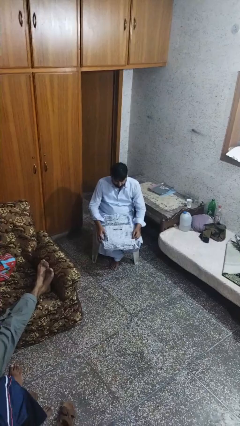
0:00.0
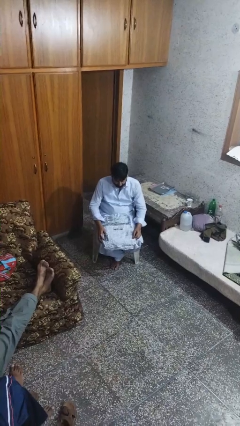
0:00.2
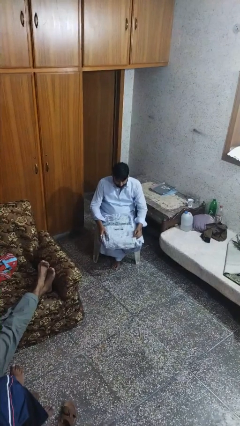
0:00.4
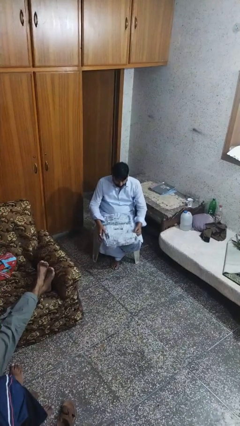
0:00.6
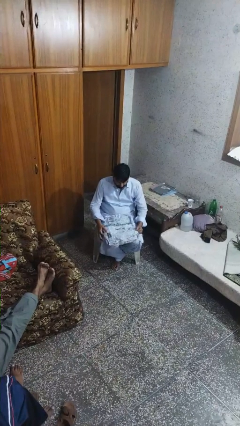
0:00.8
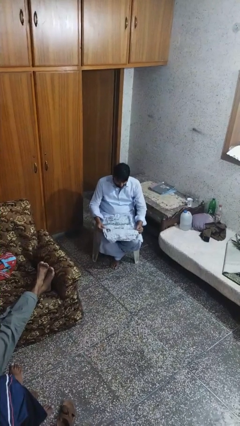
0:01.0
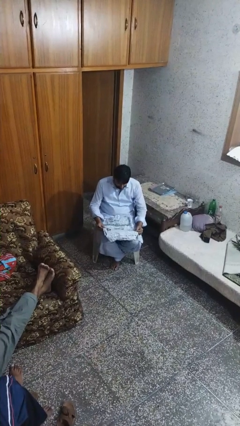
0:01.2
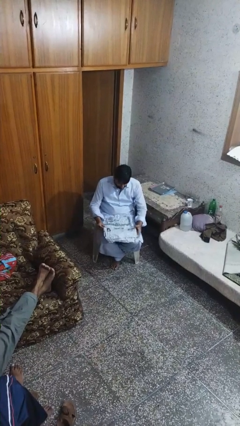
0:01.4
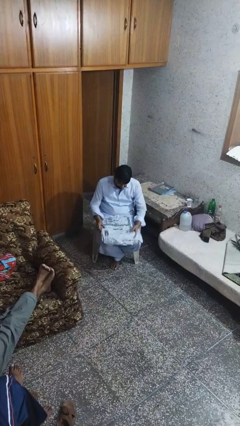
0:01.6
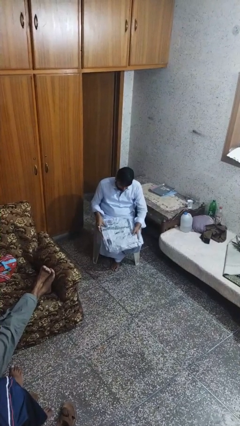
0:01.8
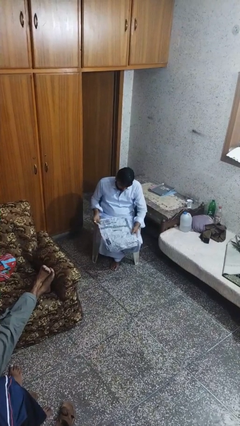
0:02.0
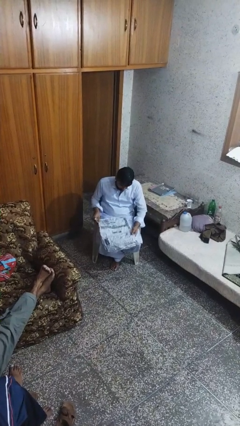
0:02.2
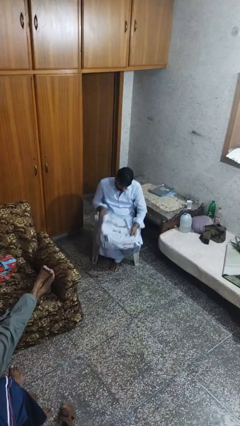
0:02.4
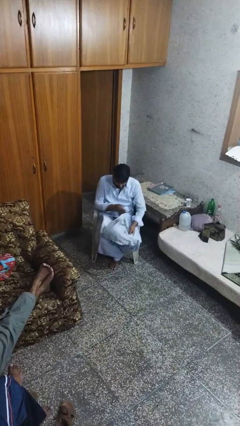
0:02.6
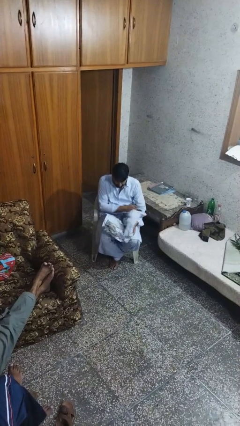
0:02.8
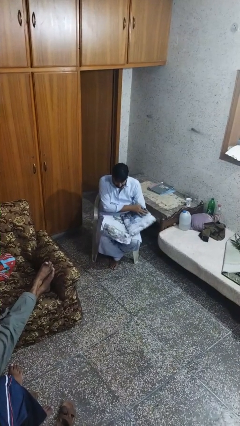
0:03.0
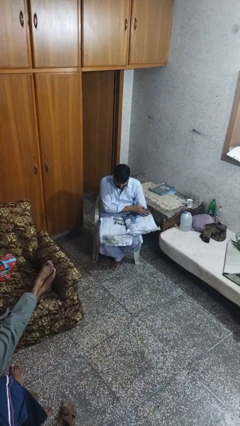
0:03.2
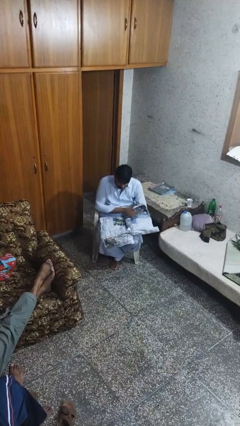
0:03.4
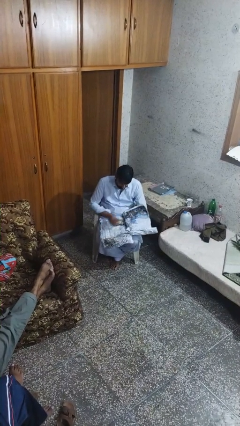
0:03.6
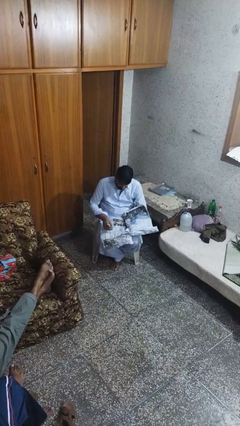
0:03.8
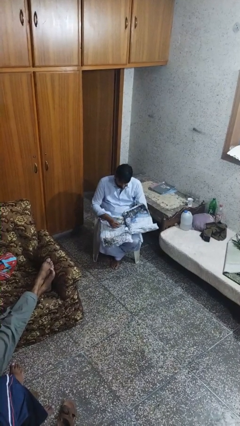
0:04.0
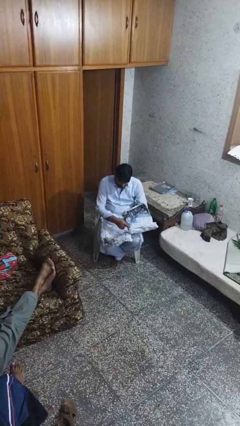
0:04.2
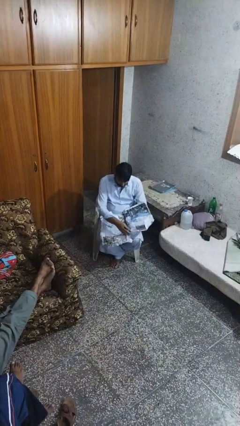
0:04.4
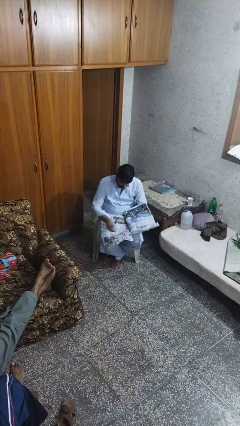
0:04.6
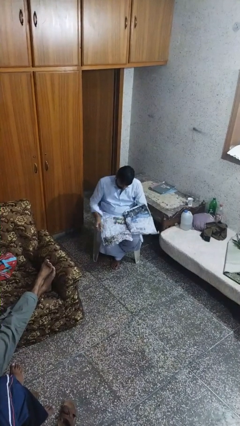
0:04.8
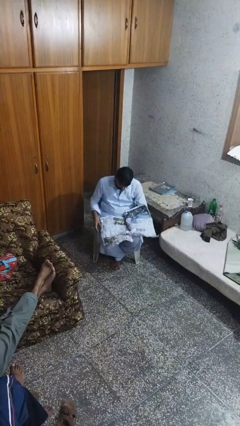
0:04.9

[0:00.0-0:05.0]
person reads newspaper

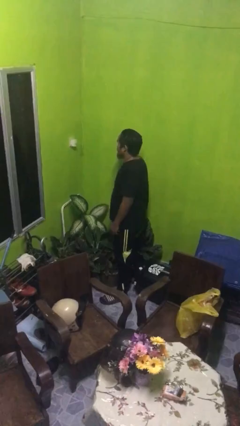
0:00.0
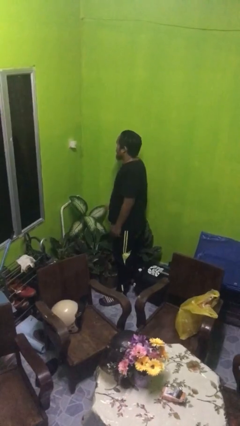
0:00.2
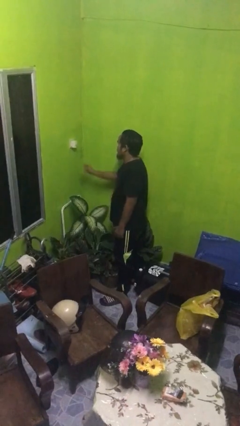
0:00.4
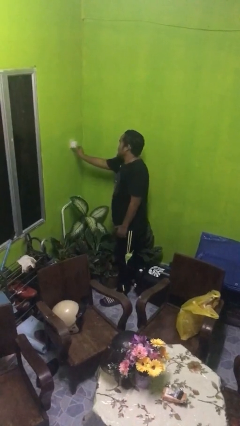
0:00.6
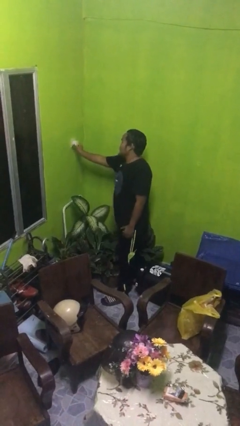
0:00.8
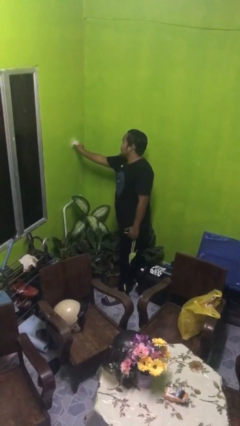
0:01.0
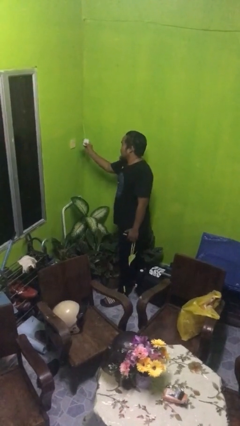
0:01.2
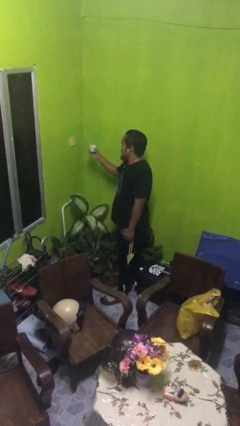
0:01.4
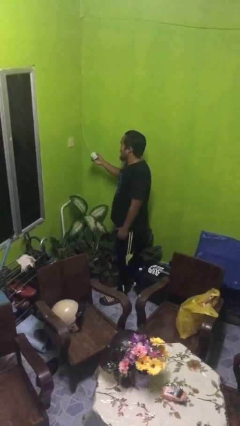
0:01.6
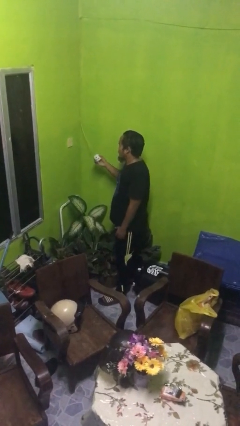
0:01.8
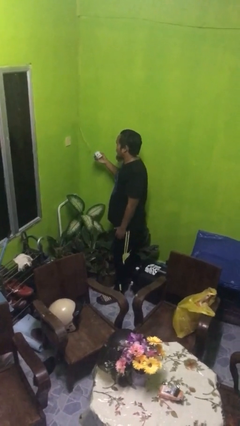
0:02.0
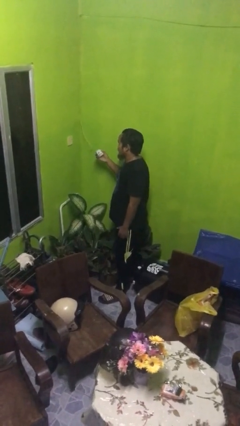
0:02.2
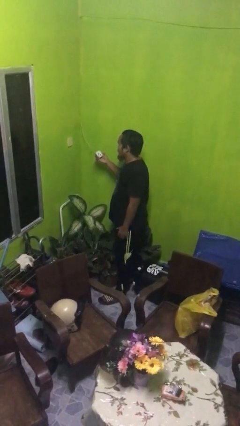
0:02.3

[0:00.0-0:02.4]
person unplugs from electrical socket

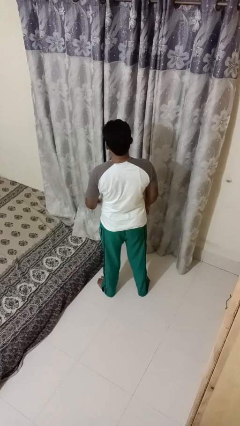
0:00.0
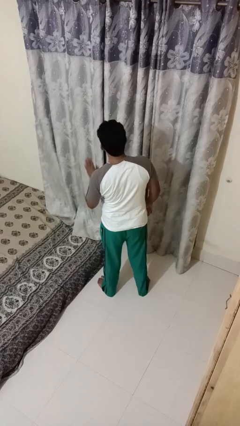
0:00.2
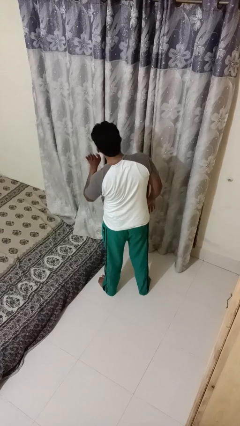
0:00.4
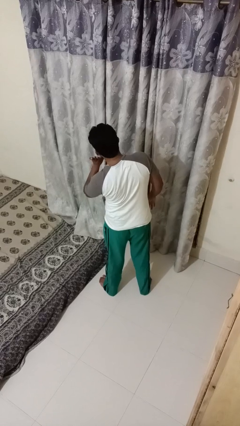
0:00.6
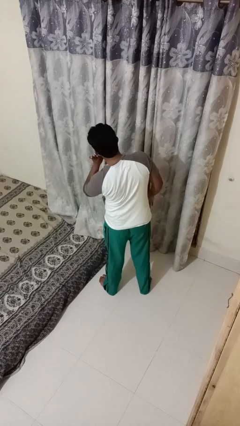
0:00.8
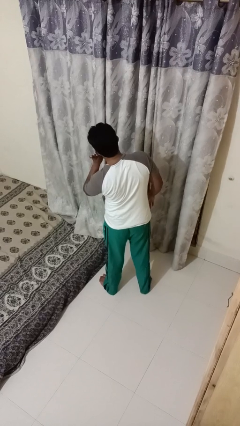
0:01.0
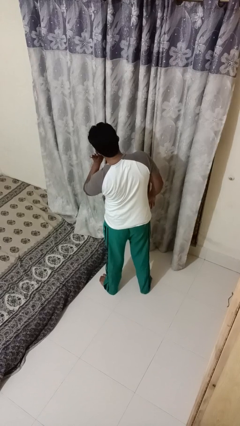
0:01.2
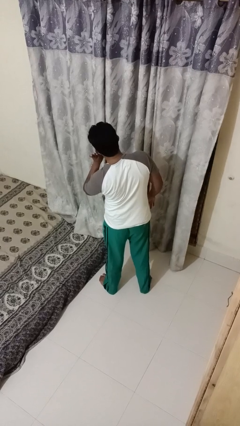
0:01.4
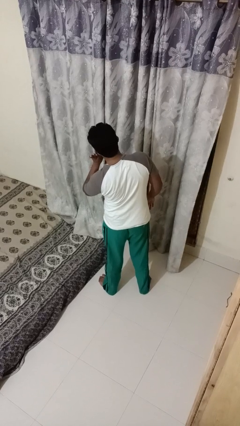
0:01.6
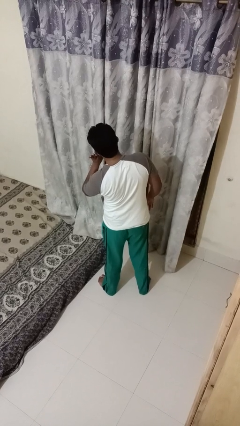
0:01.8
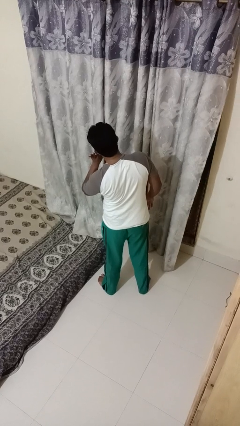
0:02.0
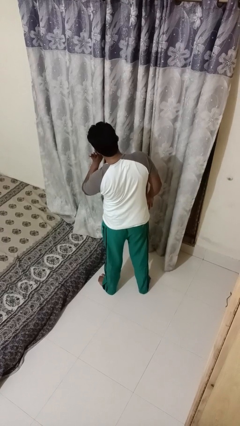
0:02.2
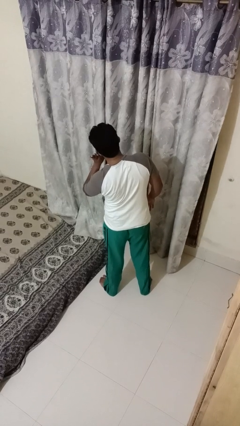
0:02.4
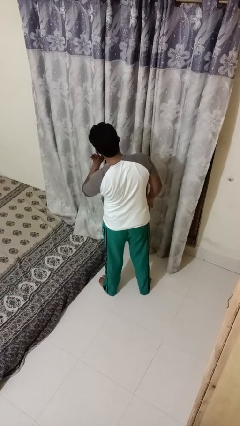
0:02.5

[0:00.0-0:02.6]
person gestures listen closely

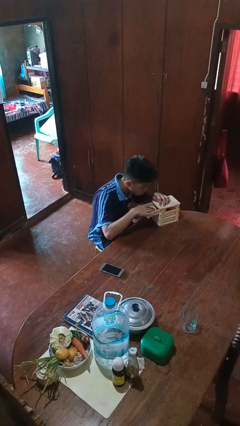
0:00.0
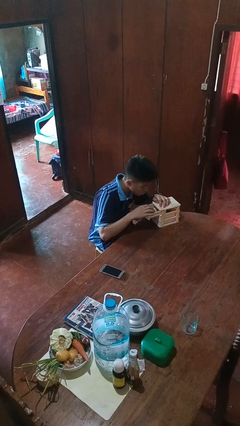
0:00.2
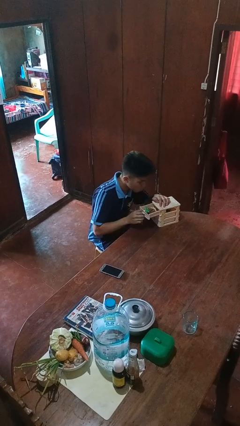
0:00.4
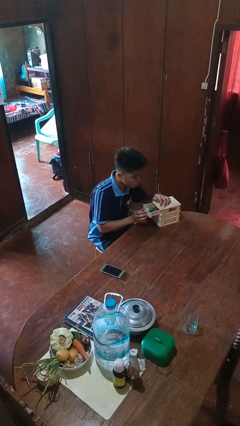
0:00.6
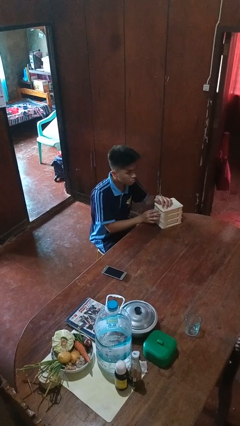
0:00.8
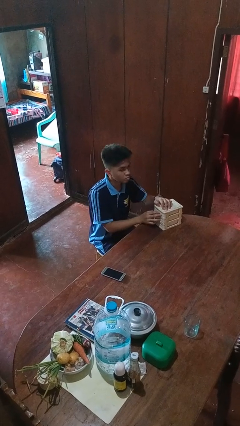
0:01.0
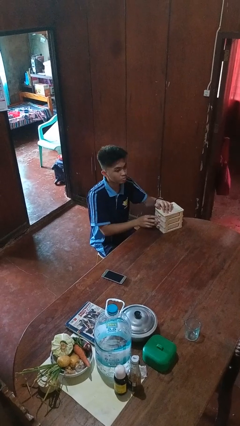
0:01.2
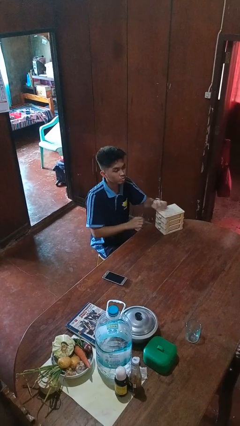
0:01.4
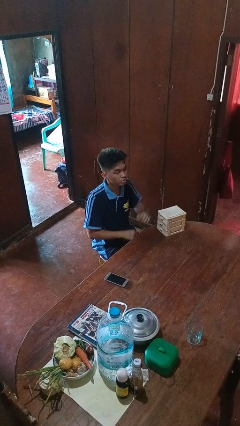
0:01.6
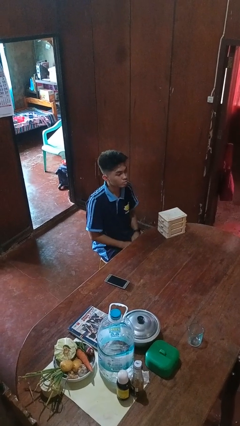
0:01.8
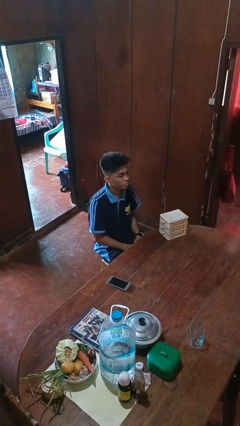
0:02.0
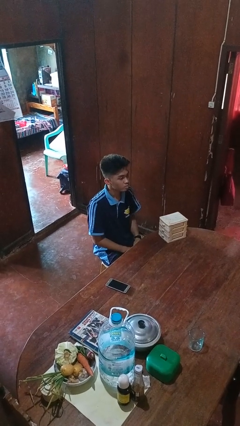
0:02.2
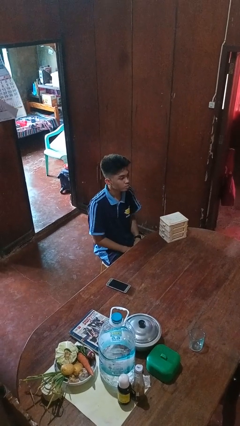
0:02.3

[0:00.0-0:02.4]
person closes jewelry box

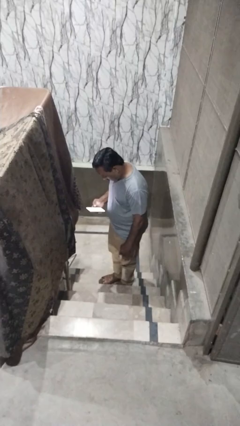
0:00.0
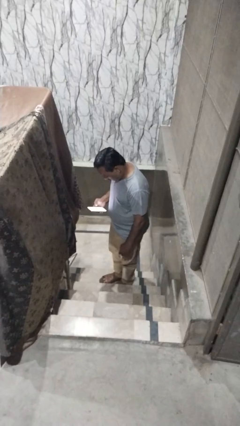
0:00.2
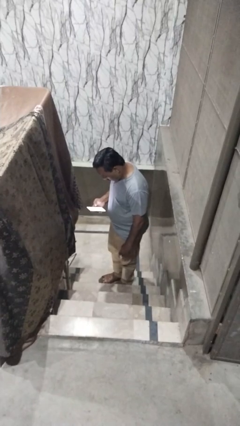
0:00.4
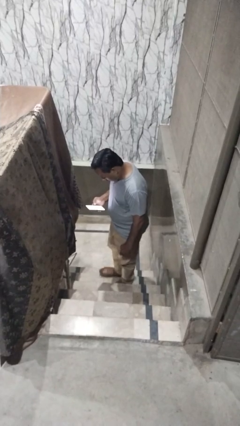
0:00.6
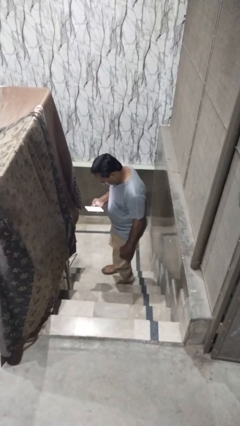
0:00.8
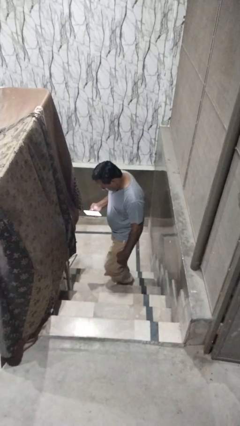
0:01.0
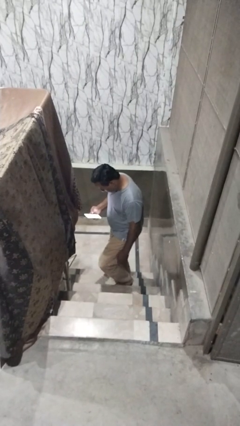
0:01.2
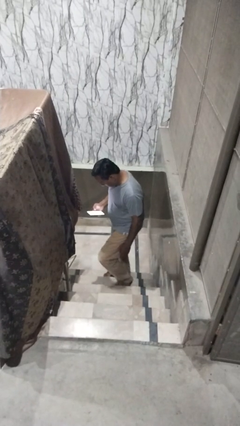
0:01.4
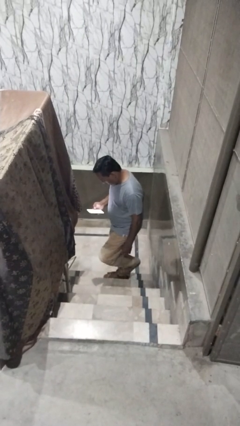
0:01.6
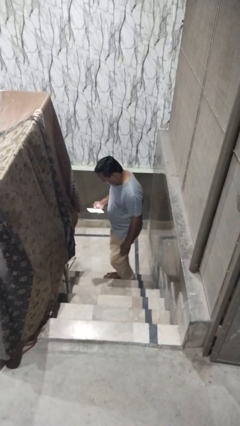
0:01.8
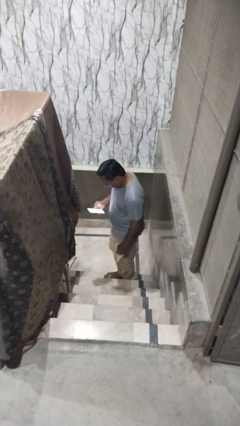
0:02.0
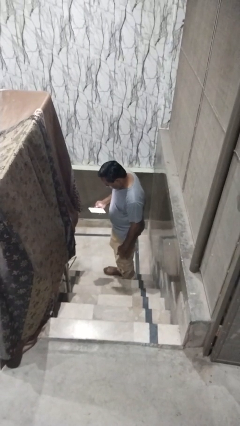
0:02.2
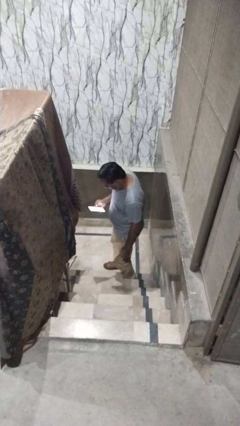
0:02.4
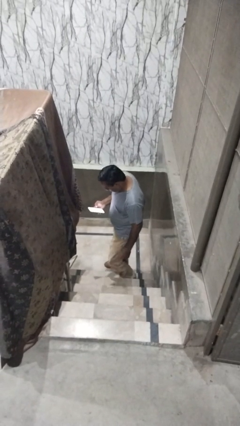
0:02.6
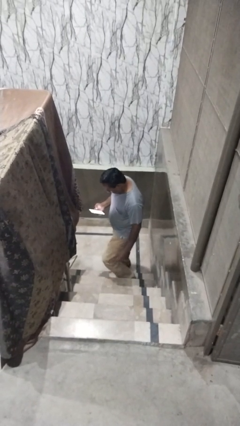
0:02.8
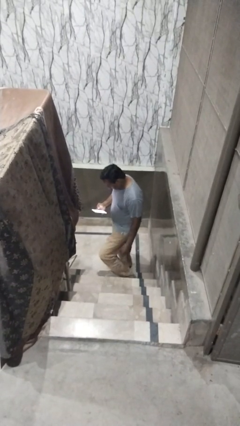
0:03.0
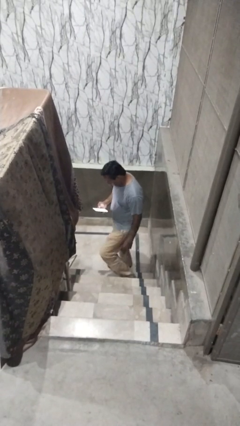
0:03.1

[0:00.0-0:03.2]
person climbs down stairs

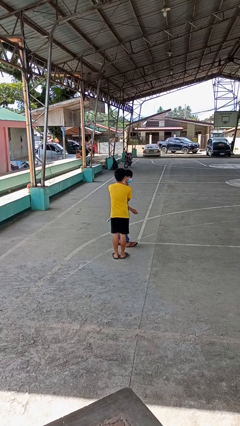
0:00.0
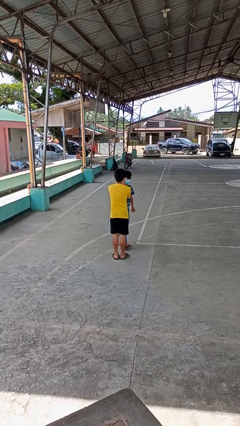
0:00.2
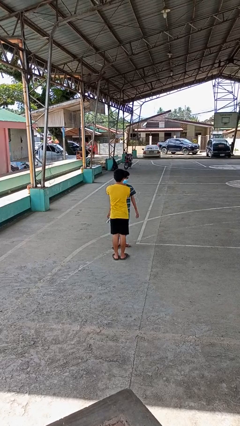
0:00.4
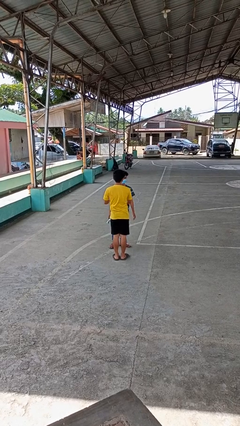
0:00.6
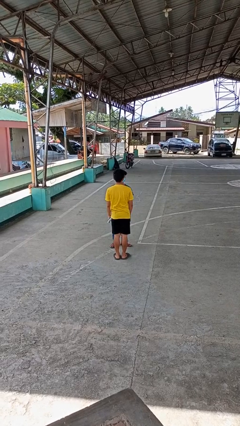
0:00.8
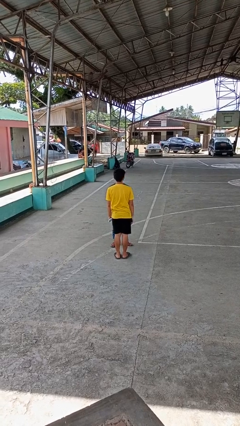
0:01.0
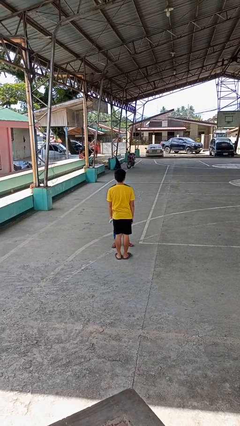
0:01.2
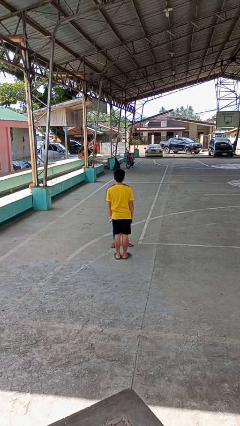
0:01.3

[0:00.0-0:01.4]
person spins person around

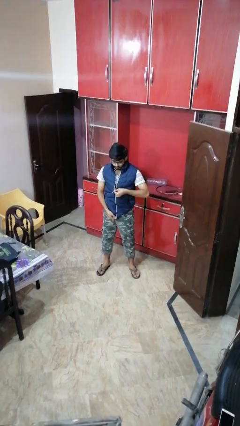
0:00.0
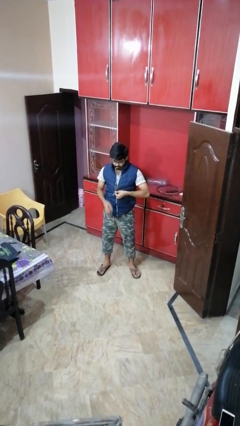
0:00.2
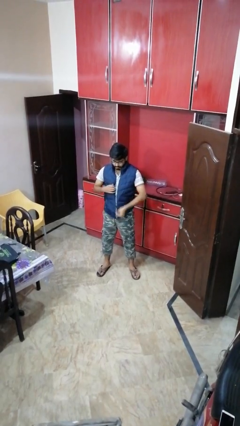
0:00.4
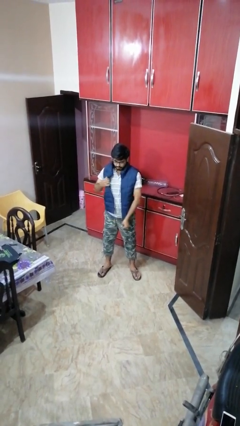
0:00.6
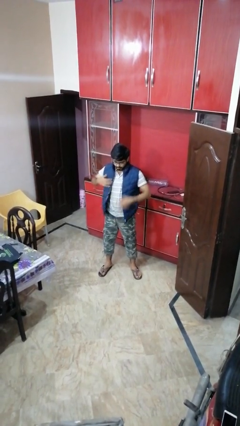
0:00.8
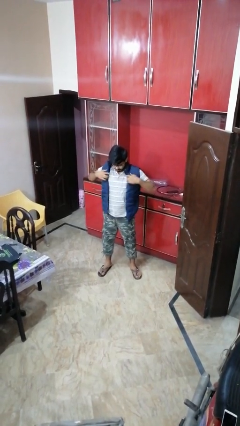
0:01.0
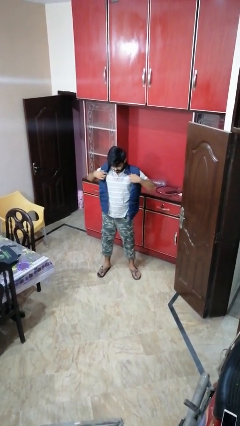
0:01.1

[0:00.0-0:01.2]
person unzips jacket
